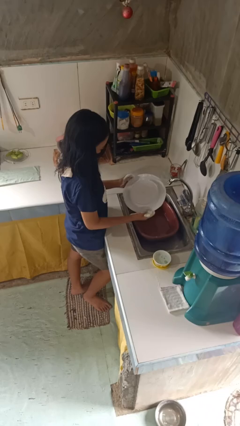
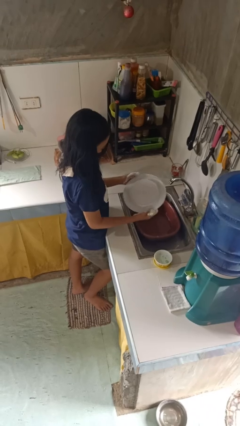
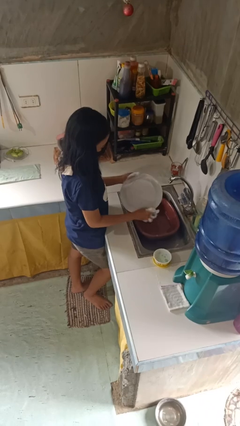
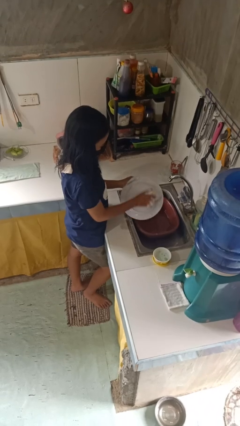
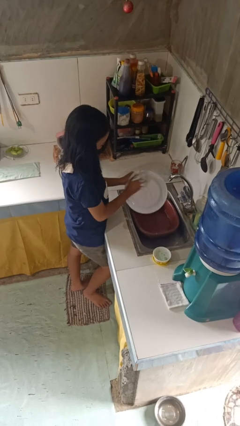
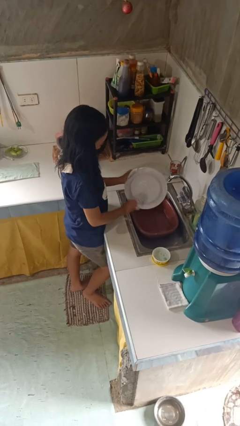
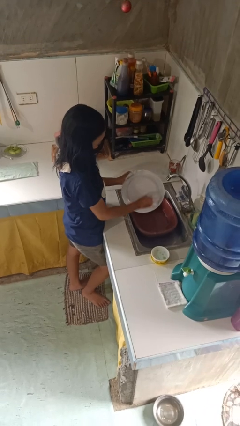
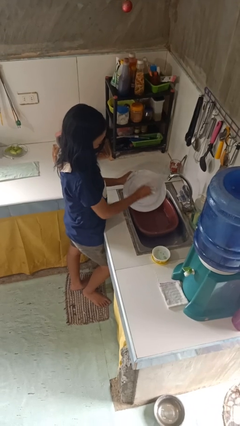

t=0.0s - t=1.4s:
person washes dish

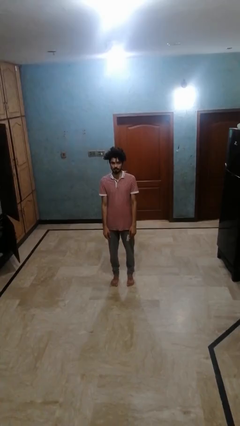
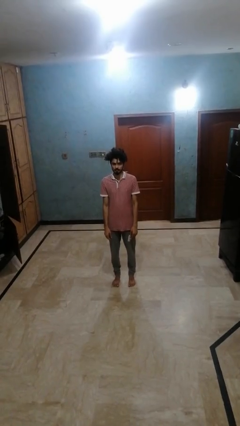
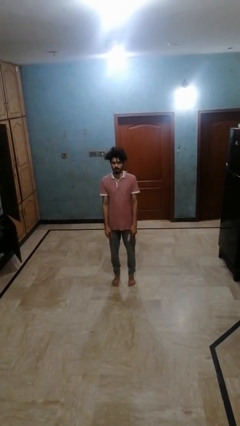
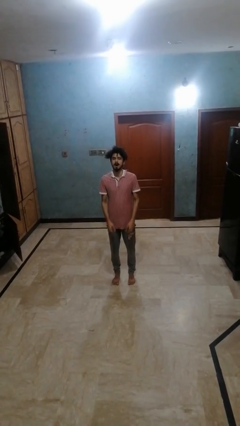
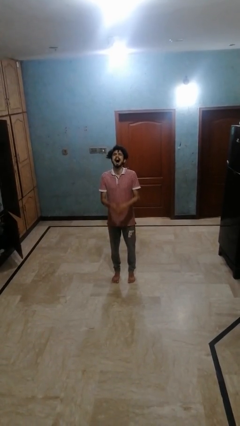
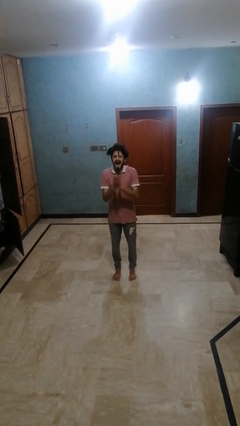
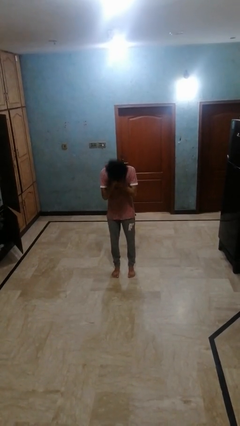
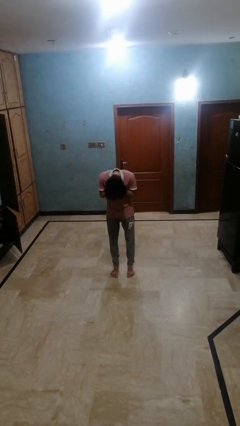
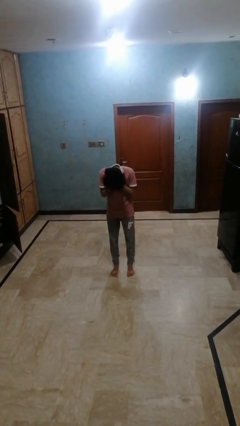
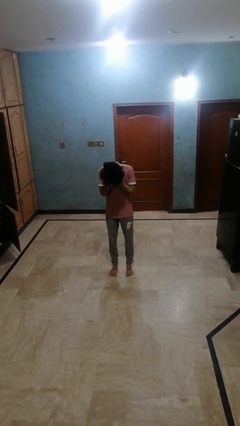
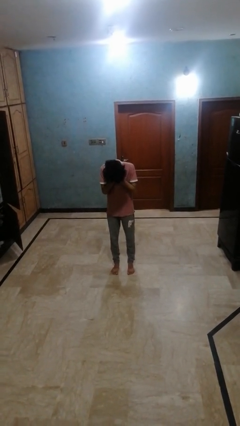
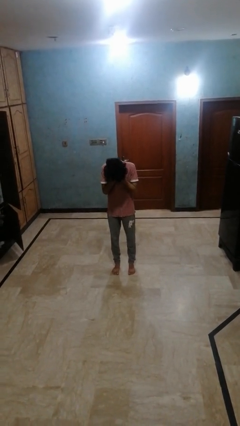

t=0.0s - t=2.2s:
person sneezes into hand

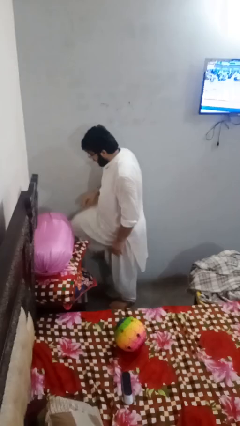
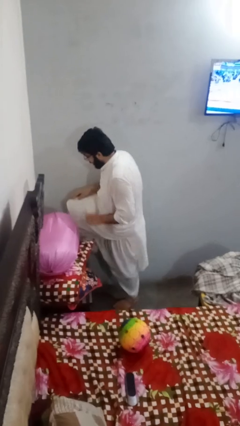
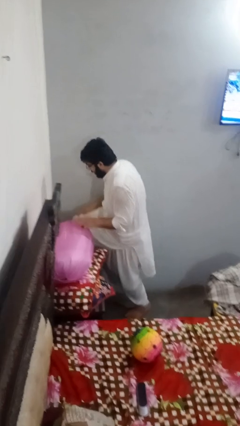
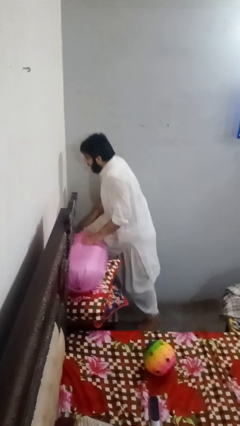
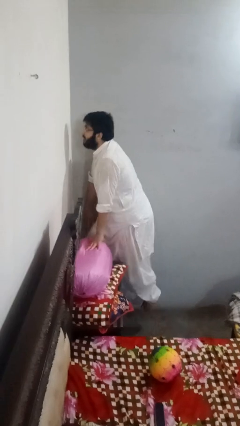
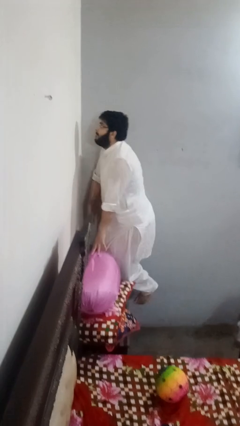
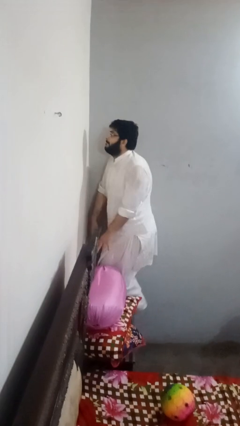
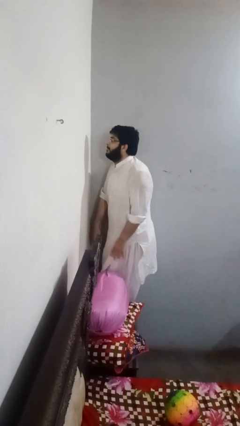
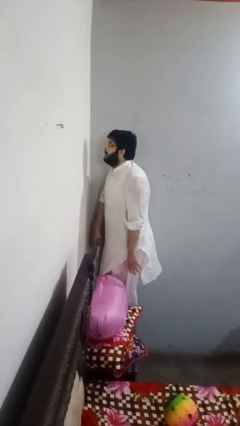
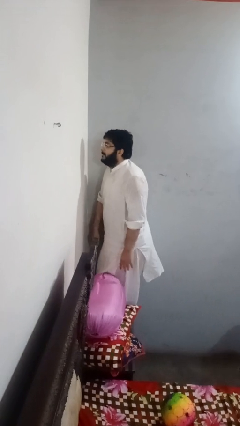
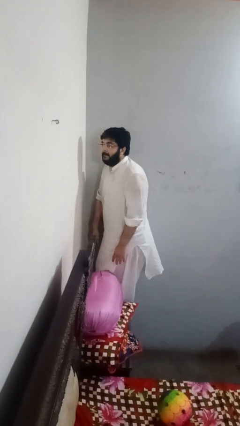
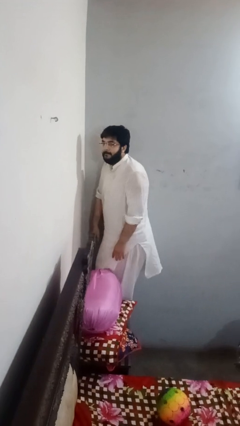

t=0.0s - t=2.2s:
person climbs on table

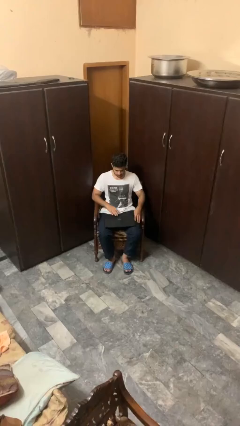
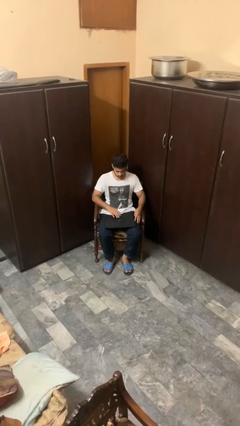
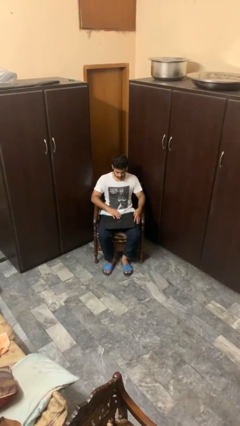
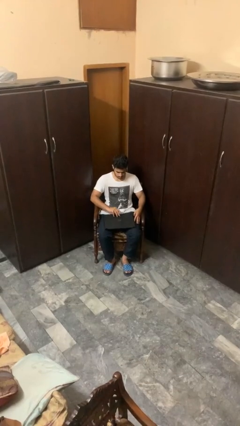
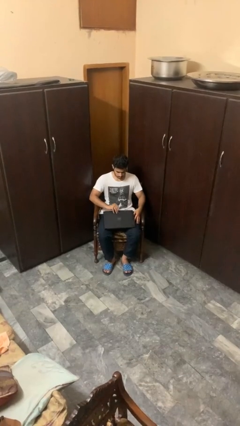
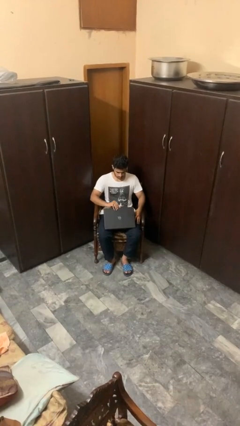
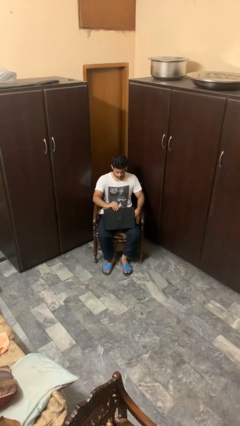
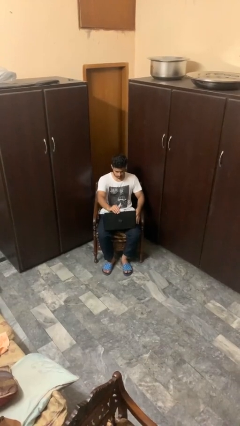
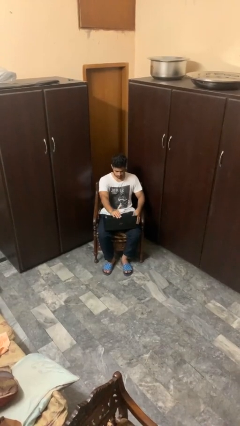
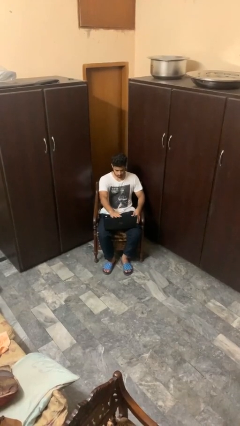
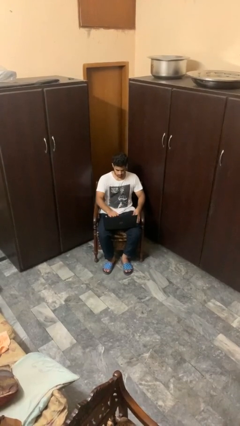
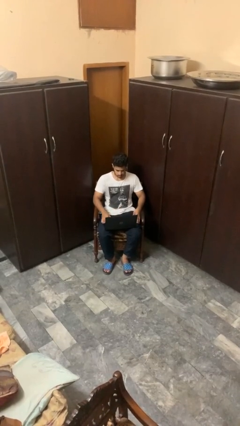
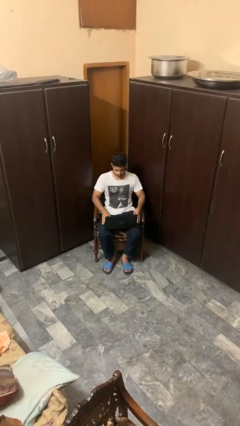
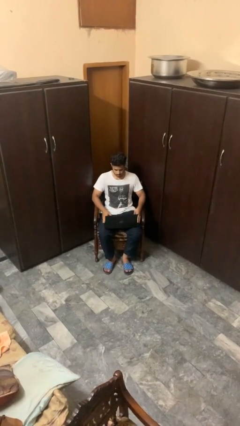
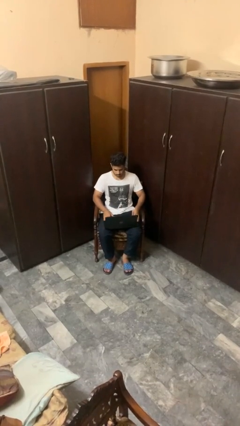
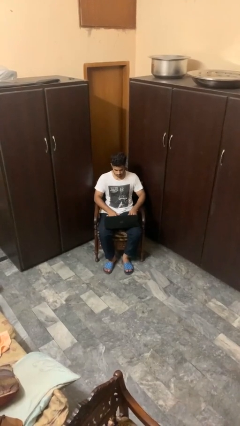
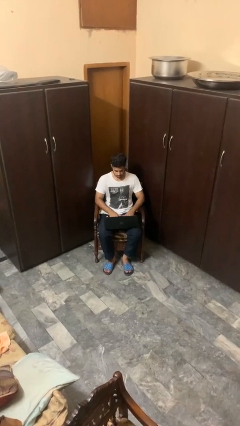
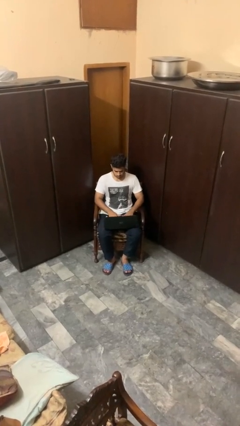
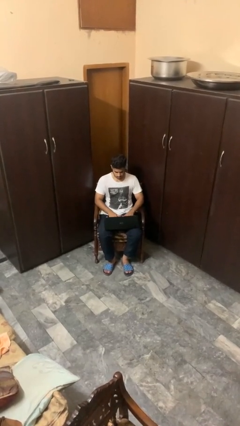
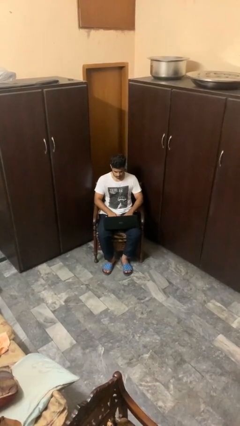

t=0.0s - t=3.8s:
person opens laptop

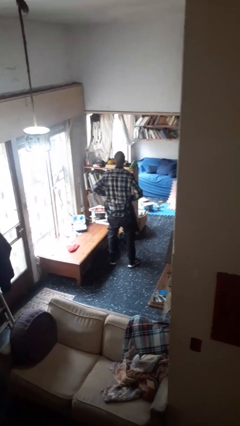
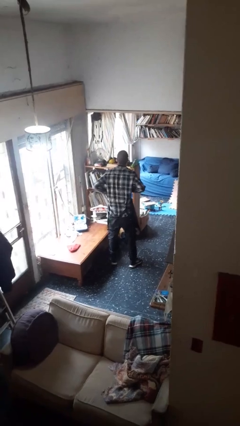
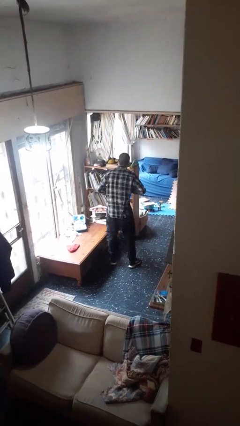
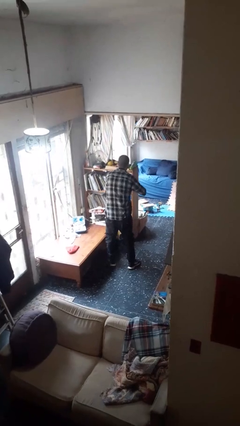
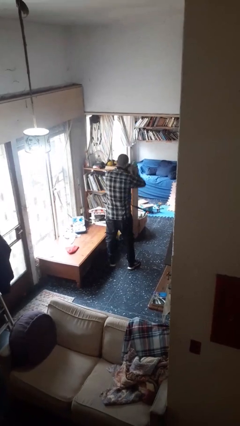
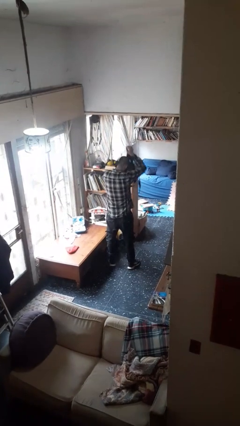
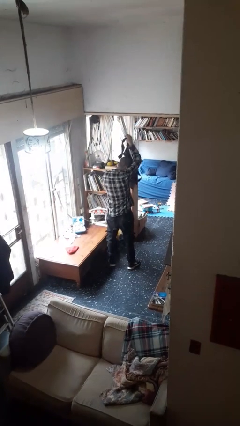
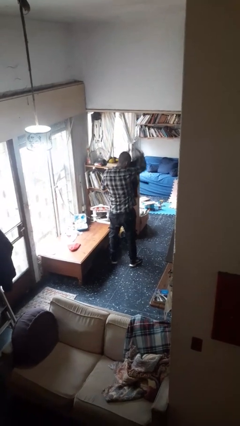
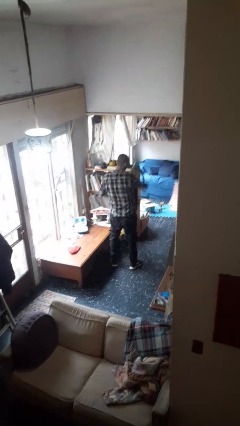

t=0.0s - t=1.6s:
person takes off apron

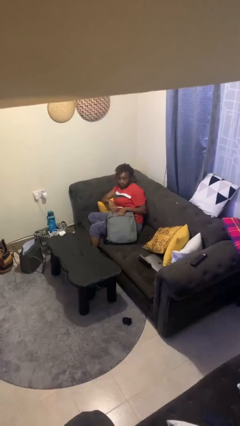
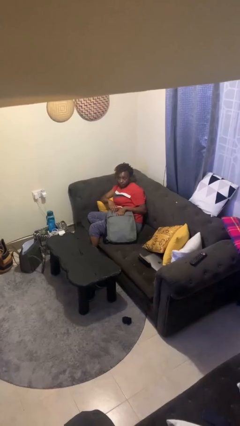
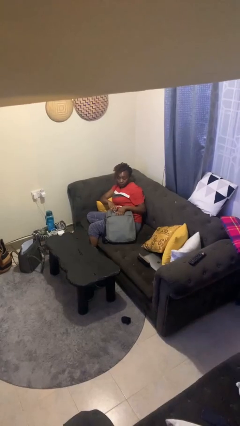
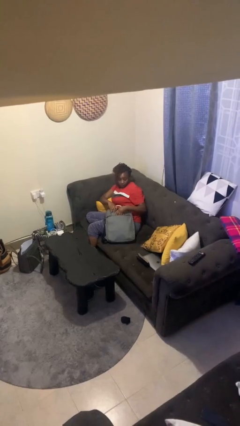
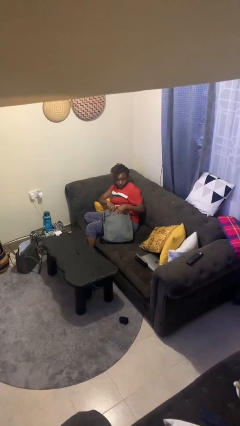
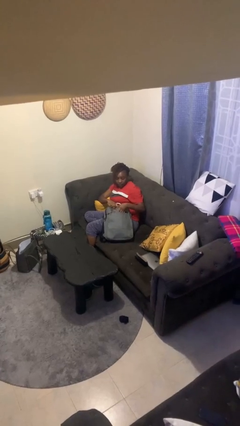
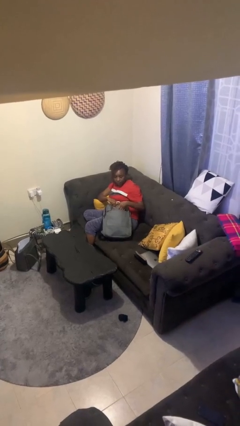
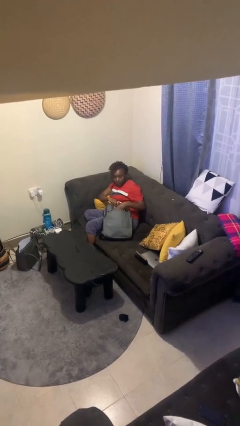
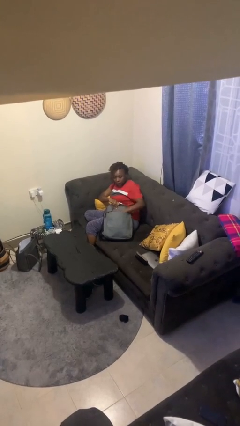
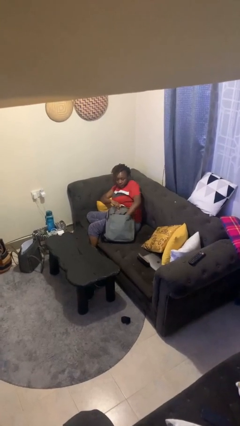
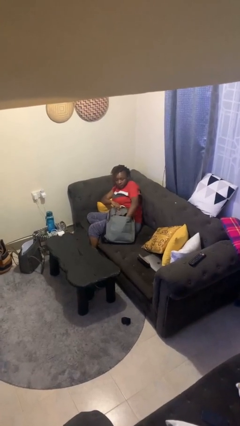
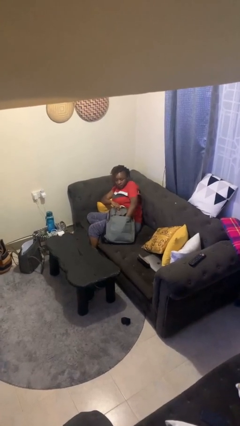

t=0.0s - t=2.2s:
person searches in backpack

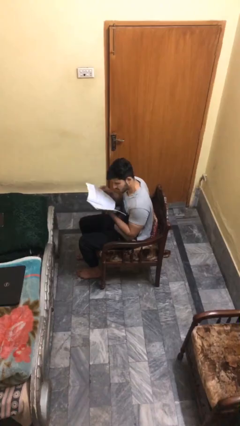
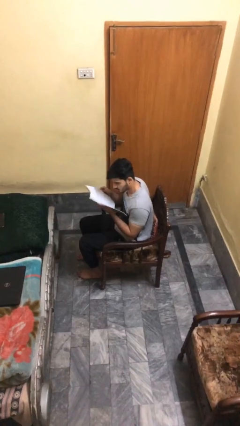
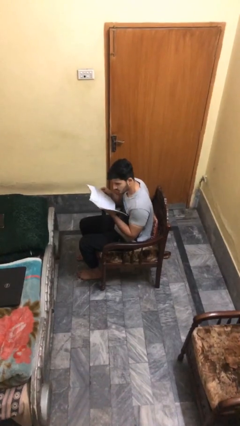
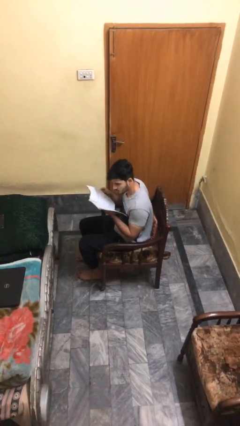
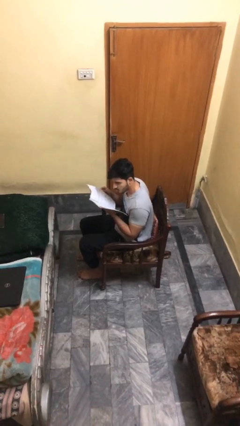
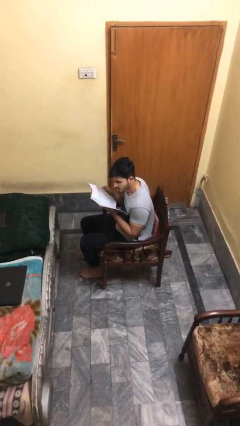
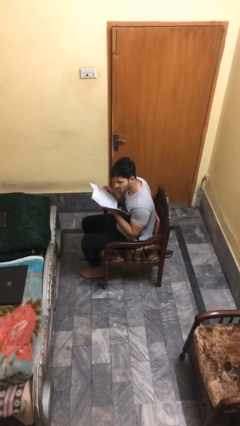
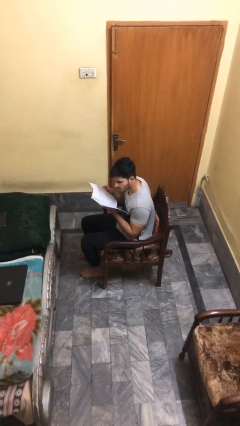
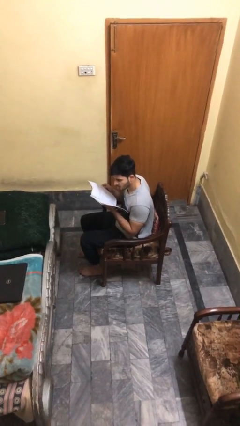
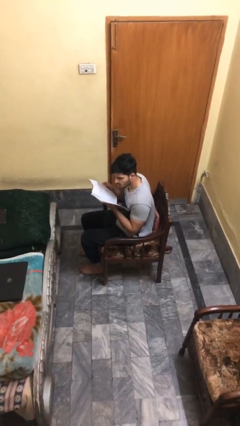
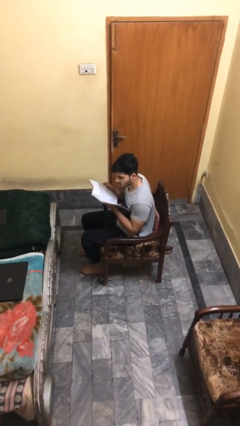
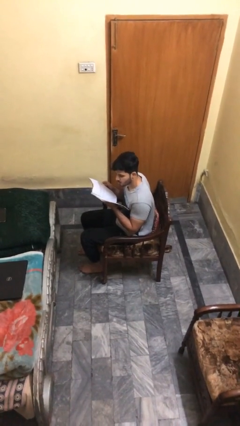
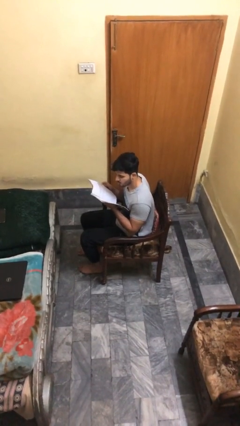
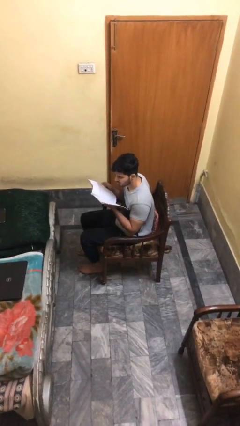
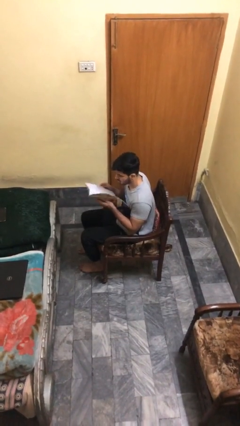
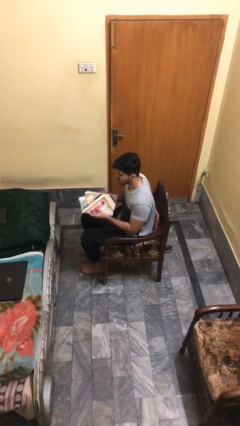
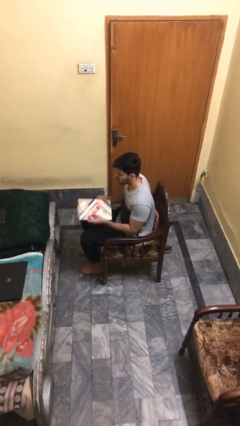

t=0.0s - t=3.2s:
person reads document
